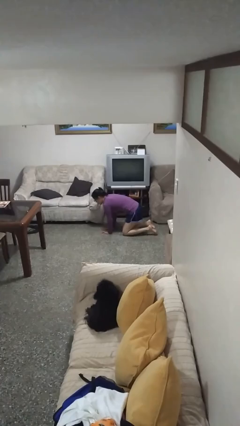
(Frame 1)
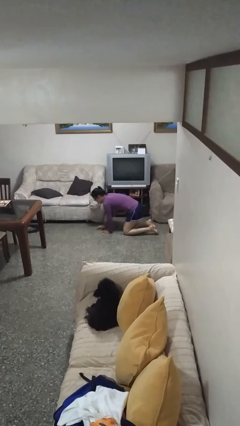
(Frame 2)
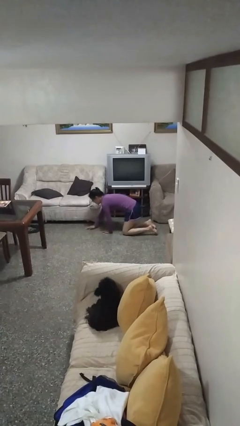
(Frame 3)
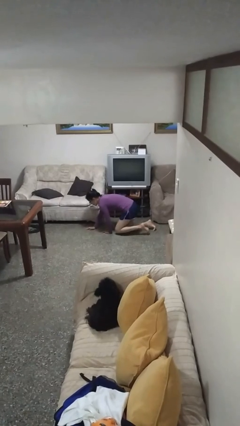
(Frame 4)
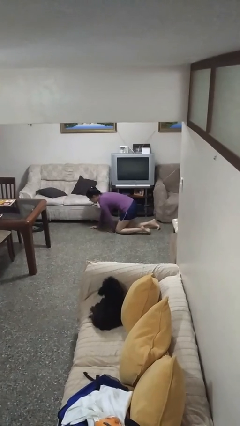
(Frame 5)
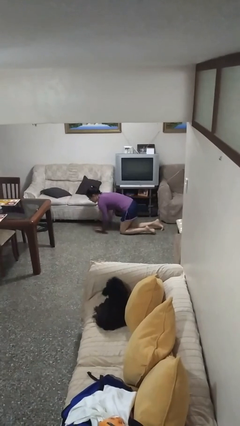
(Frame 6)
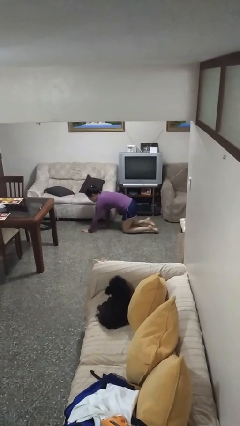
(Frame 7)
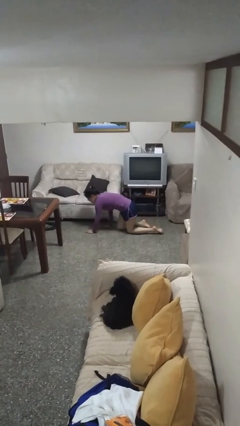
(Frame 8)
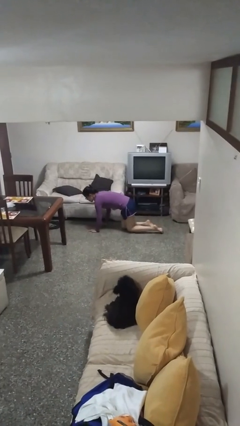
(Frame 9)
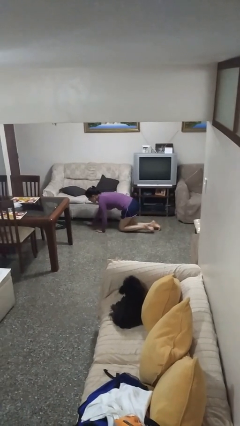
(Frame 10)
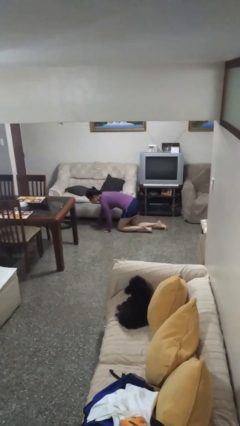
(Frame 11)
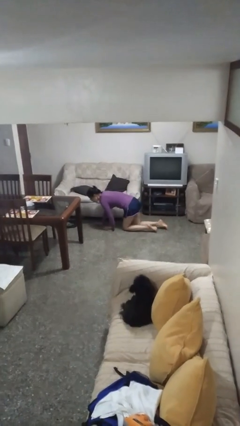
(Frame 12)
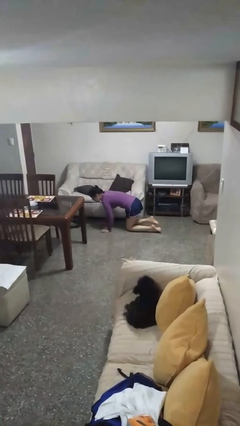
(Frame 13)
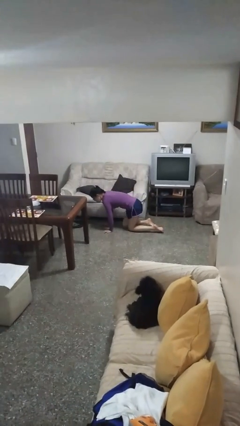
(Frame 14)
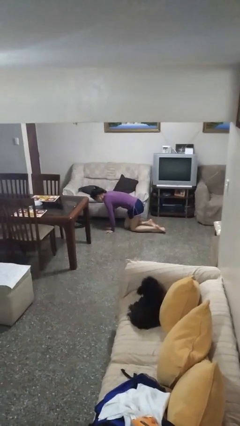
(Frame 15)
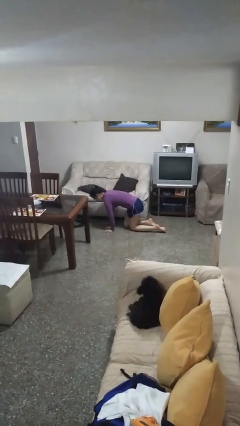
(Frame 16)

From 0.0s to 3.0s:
person crawls

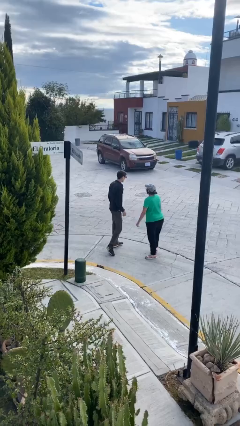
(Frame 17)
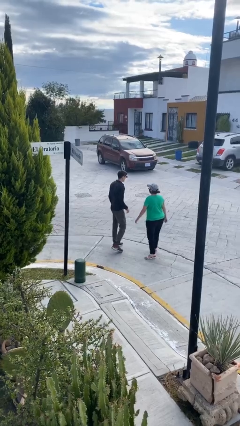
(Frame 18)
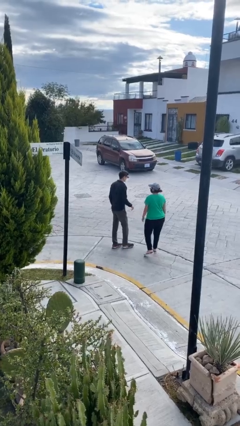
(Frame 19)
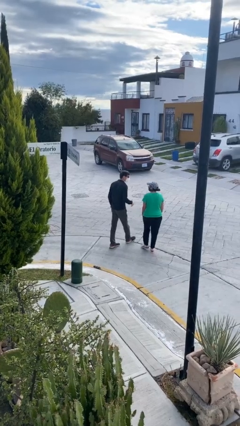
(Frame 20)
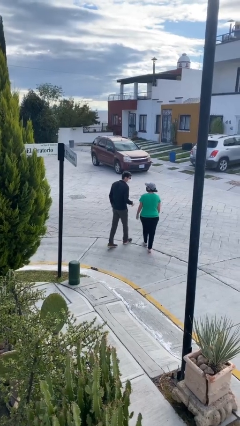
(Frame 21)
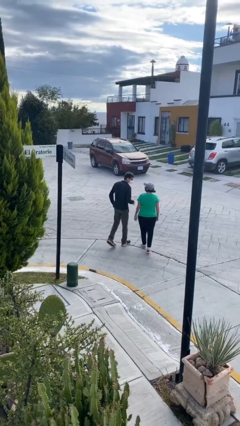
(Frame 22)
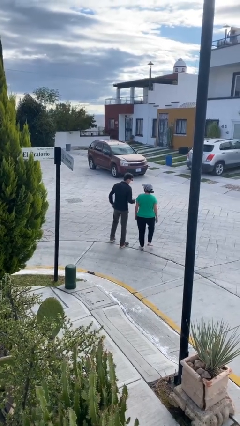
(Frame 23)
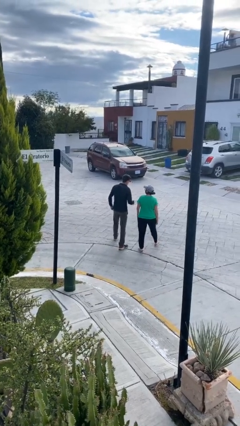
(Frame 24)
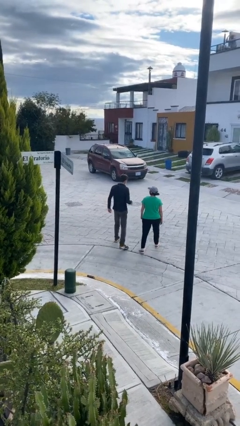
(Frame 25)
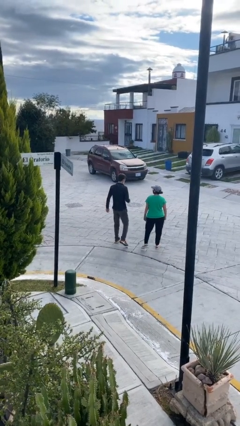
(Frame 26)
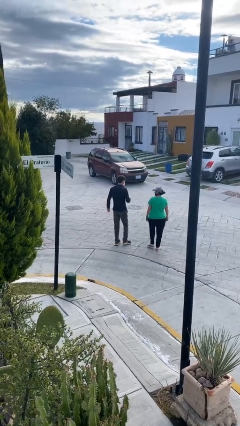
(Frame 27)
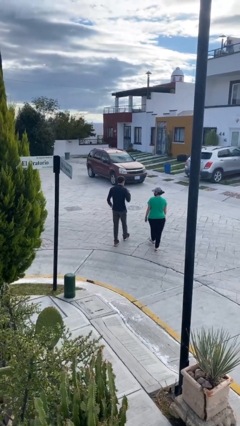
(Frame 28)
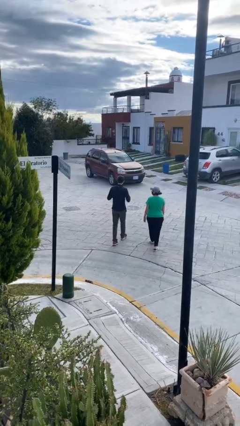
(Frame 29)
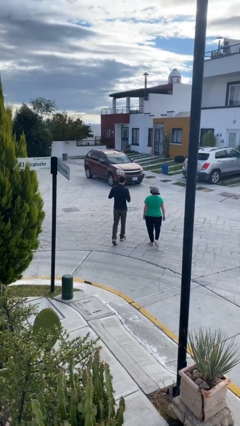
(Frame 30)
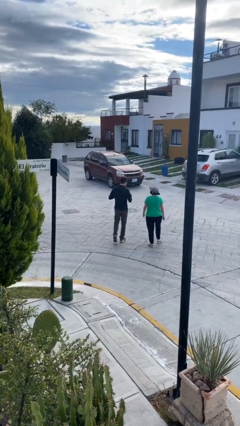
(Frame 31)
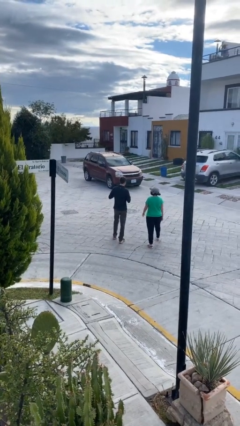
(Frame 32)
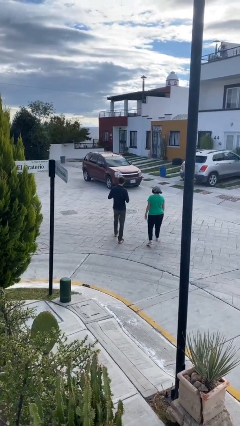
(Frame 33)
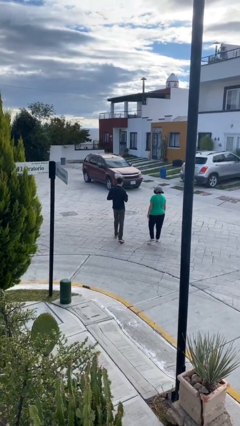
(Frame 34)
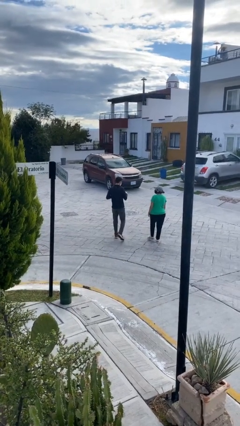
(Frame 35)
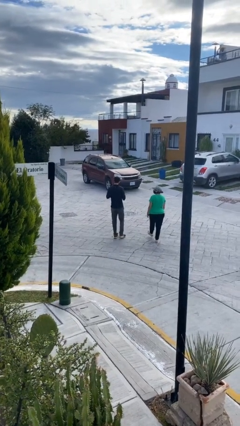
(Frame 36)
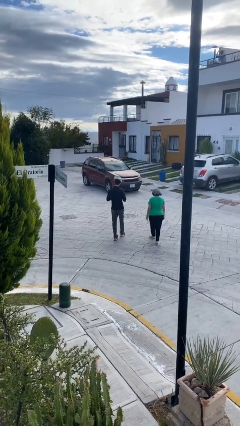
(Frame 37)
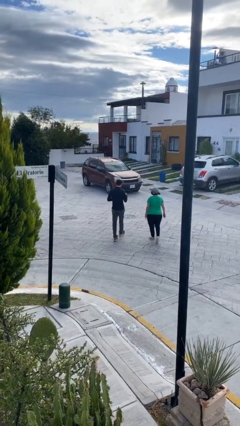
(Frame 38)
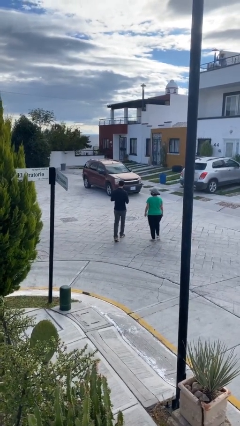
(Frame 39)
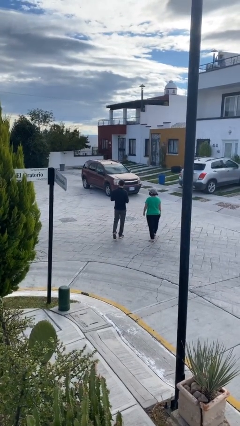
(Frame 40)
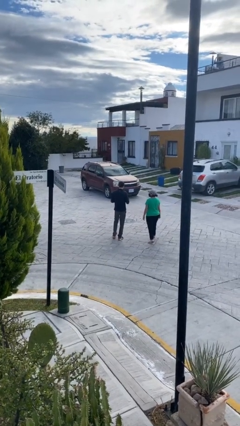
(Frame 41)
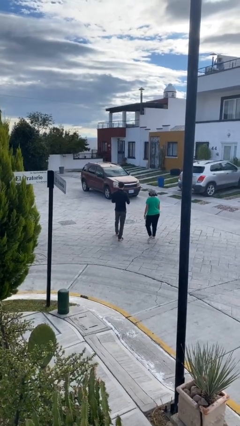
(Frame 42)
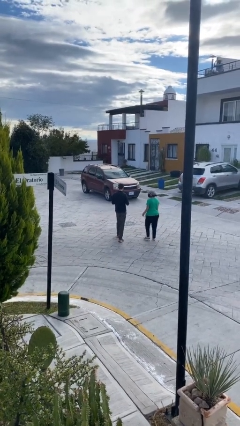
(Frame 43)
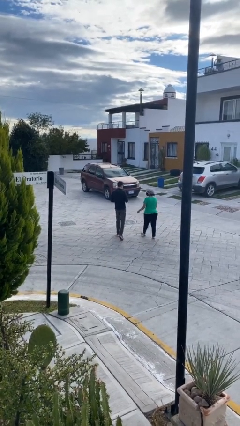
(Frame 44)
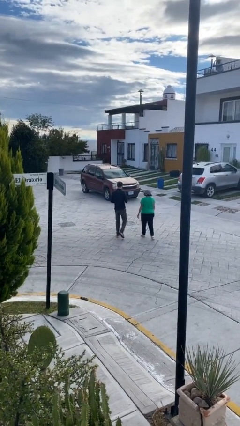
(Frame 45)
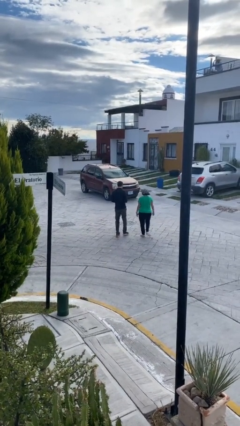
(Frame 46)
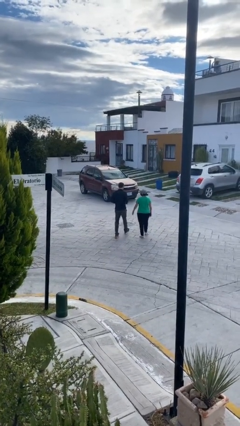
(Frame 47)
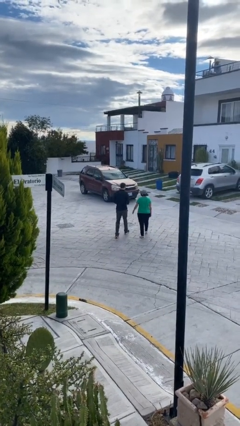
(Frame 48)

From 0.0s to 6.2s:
person talks to person

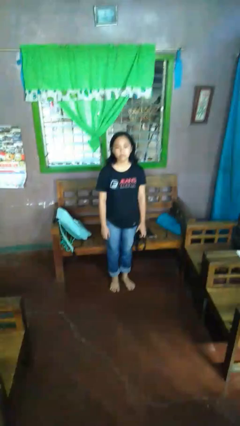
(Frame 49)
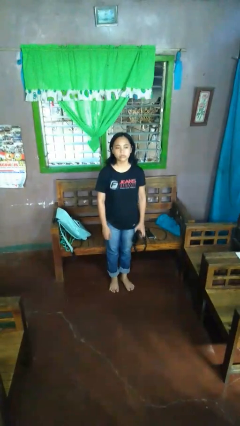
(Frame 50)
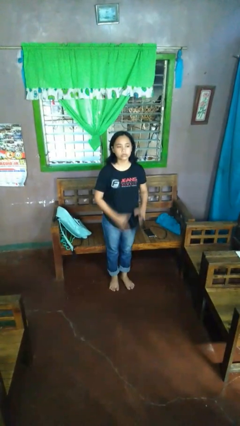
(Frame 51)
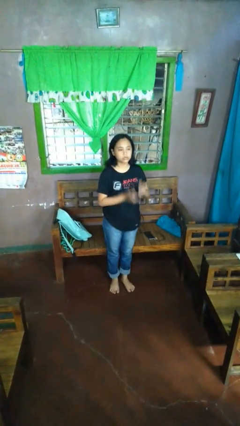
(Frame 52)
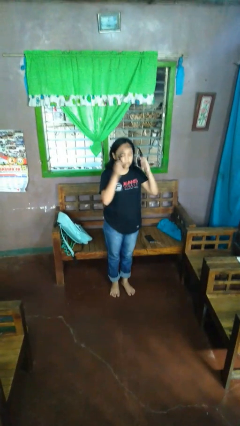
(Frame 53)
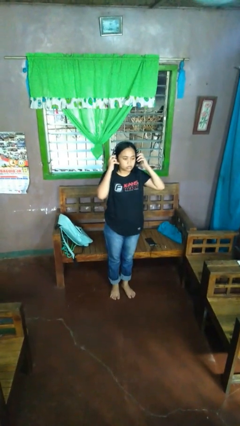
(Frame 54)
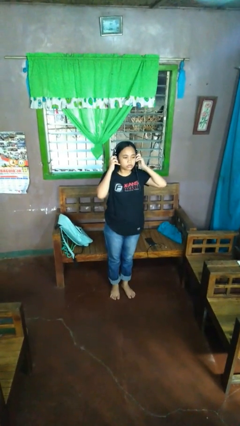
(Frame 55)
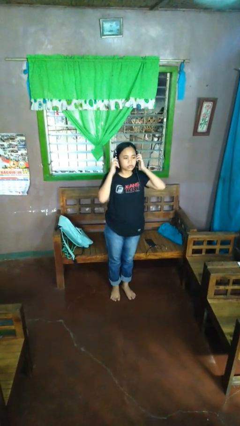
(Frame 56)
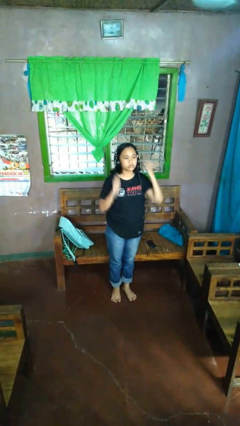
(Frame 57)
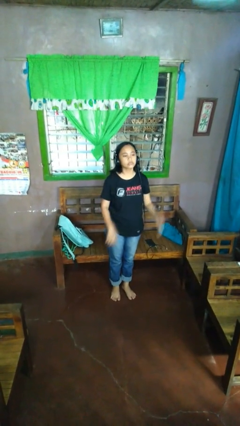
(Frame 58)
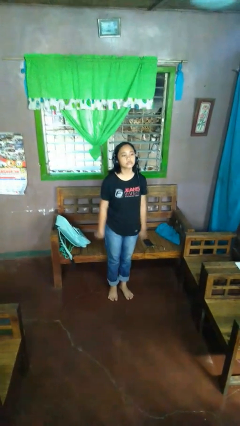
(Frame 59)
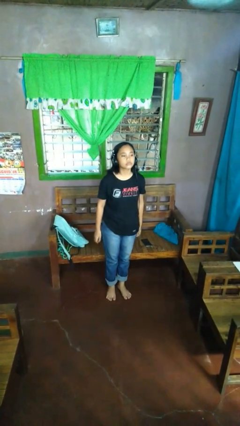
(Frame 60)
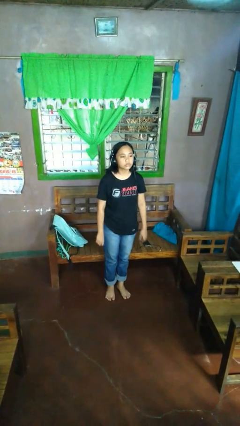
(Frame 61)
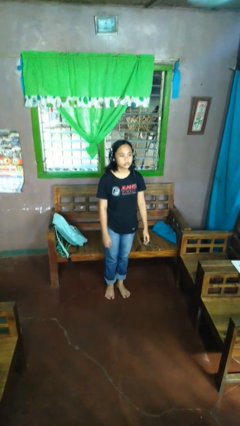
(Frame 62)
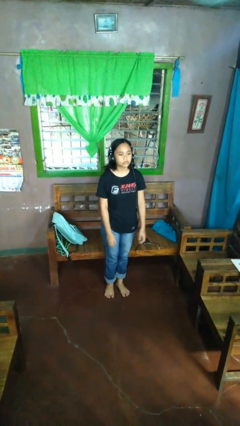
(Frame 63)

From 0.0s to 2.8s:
person puts on headphones

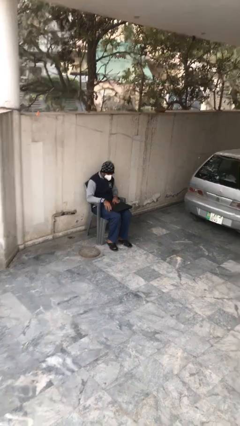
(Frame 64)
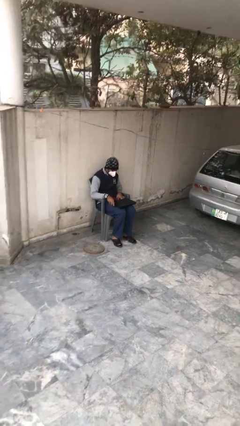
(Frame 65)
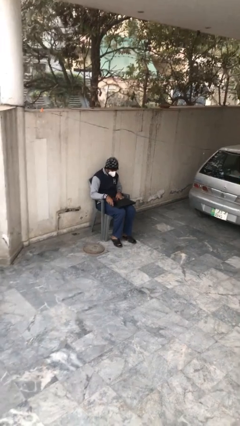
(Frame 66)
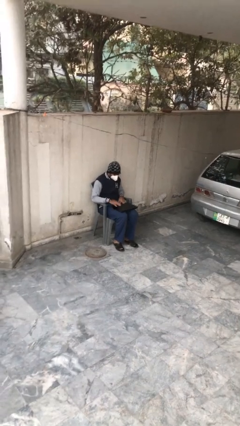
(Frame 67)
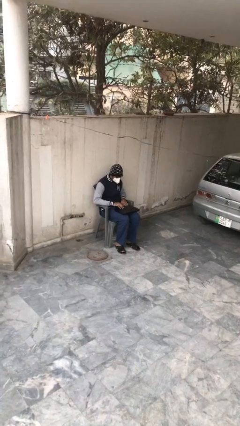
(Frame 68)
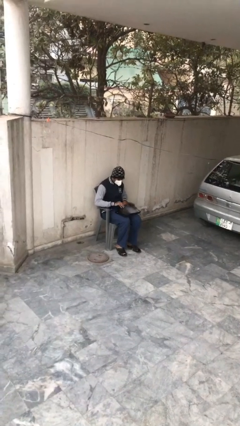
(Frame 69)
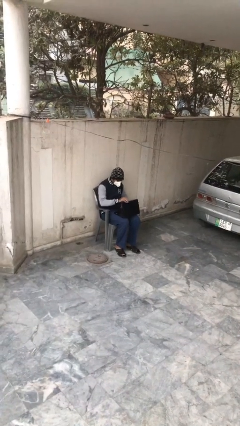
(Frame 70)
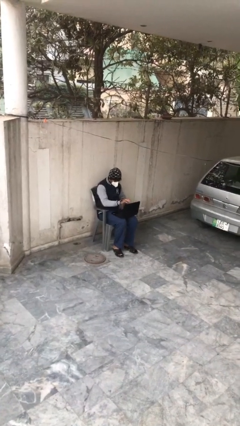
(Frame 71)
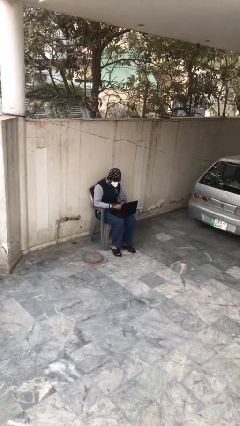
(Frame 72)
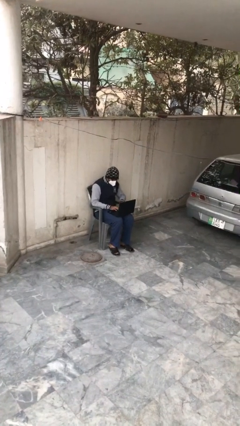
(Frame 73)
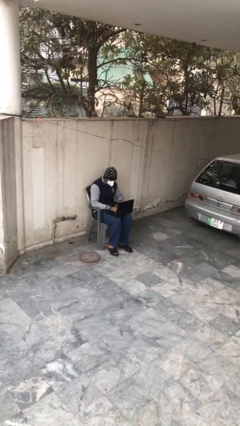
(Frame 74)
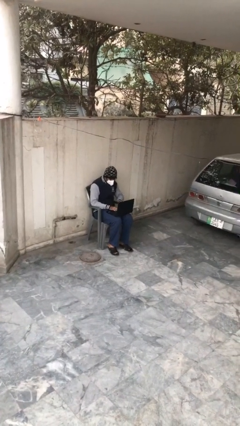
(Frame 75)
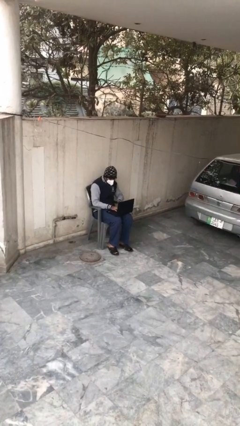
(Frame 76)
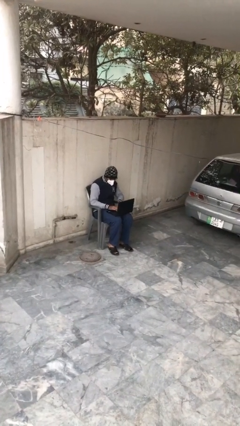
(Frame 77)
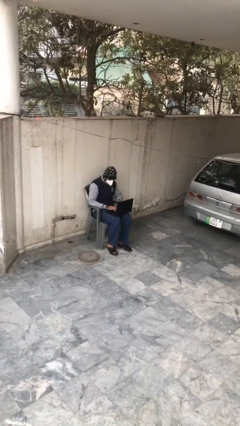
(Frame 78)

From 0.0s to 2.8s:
person interacts with laptop

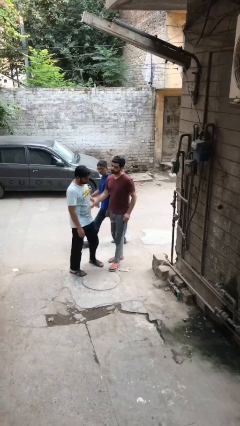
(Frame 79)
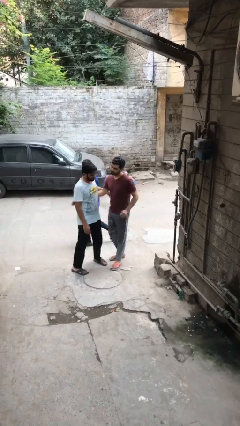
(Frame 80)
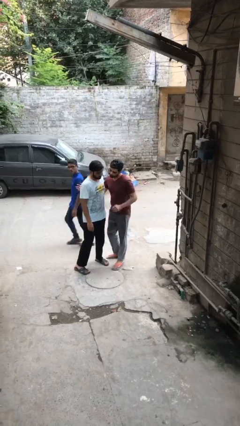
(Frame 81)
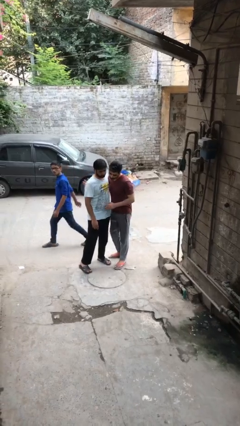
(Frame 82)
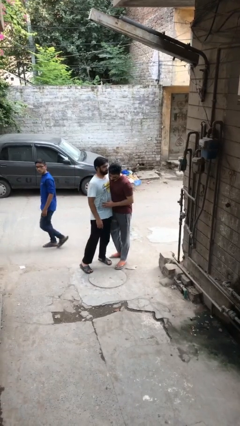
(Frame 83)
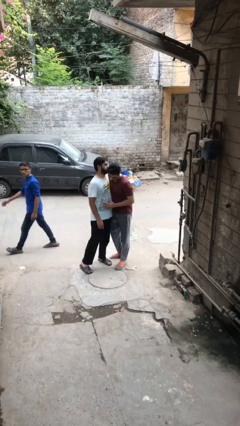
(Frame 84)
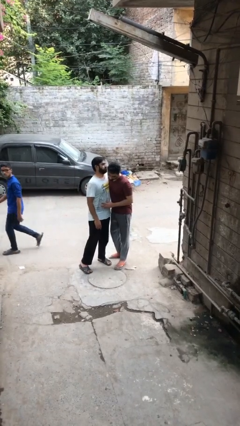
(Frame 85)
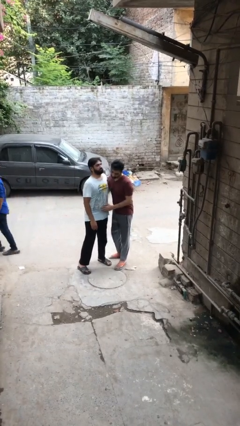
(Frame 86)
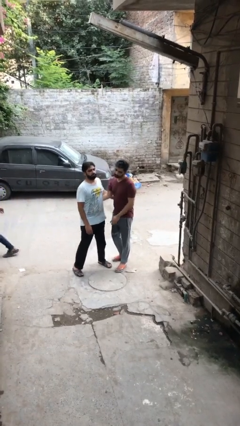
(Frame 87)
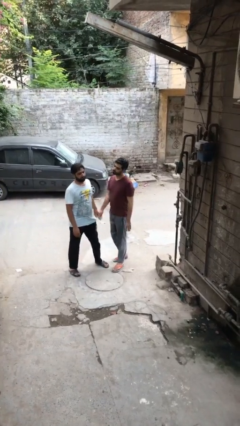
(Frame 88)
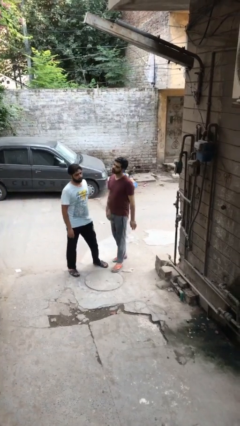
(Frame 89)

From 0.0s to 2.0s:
person embraces person

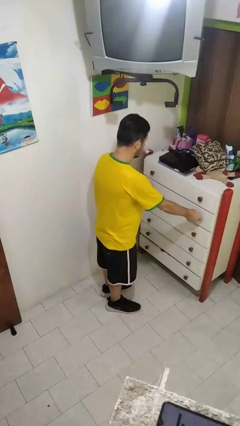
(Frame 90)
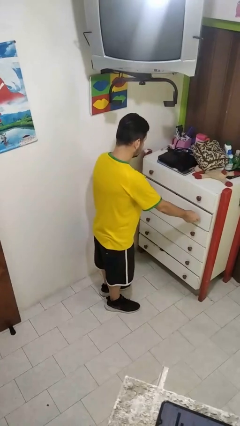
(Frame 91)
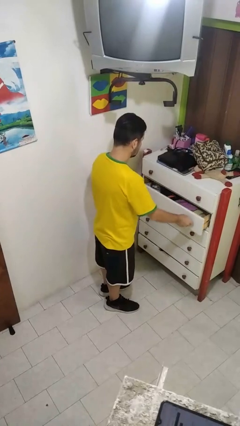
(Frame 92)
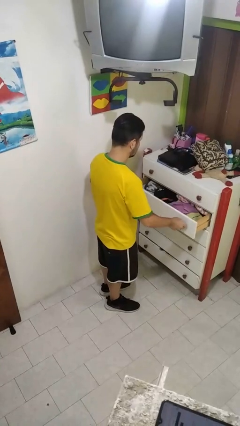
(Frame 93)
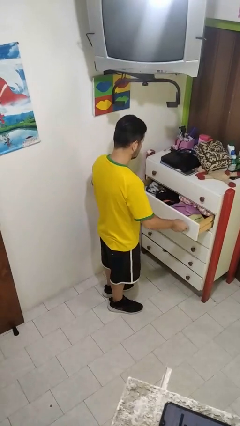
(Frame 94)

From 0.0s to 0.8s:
person opens dresser drawer
